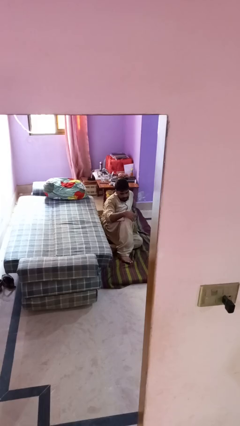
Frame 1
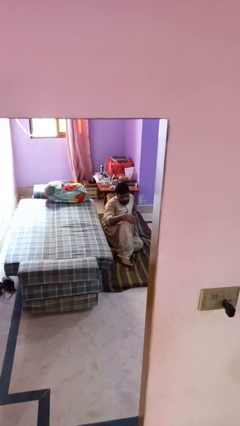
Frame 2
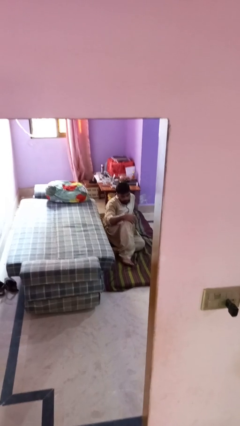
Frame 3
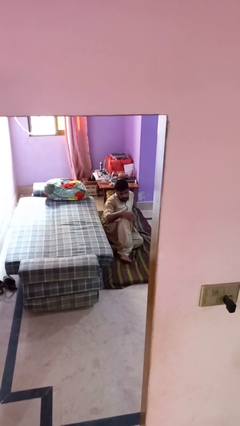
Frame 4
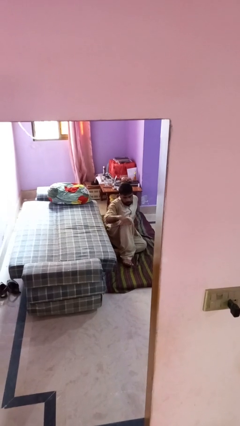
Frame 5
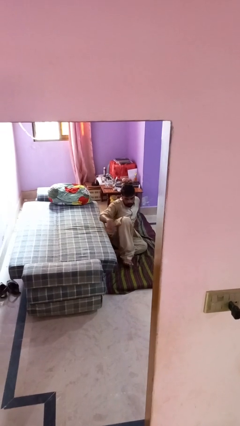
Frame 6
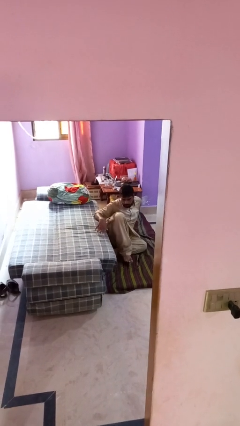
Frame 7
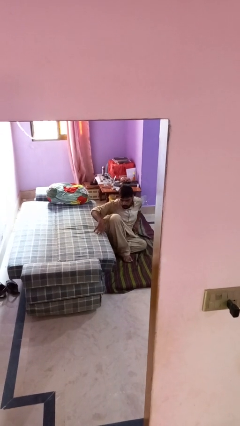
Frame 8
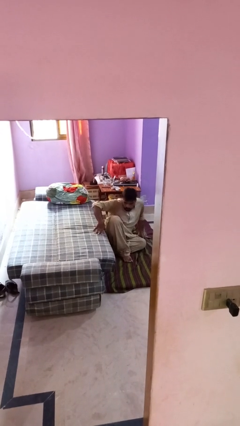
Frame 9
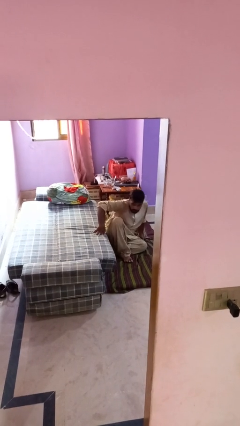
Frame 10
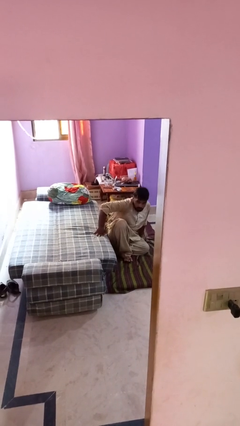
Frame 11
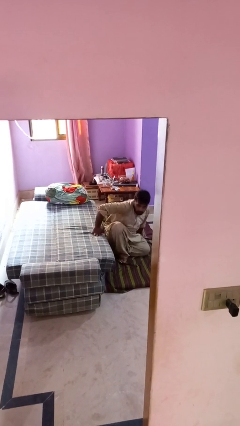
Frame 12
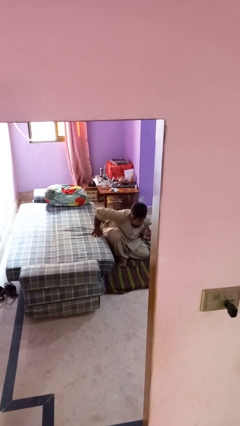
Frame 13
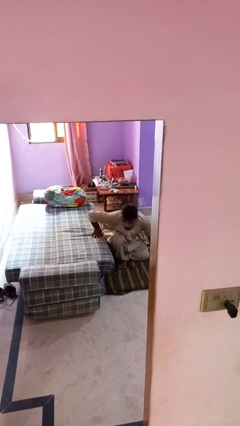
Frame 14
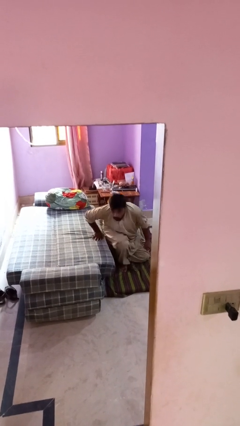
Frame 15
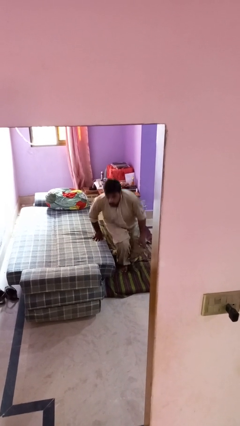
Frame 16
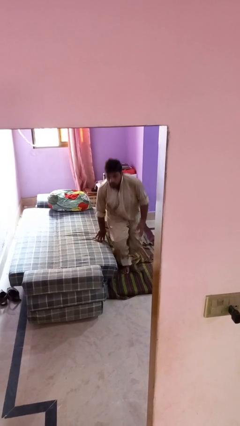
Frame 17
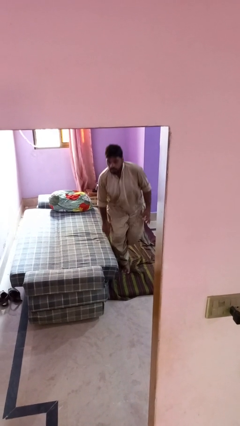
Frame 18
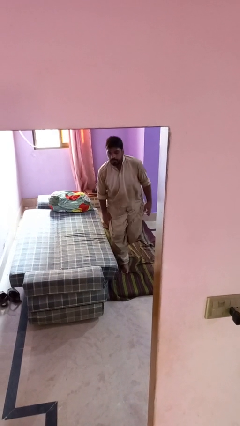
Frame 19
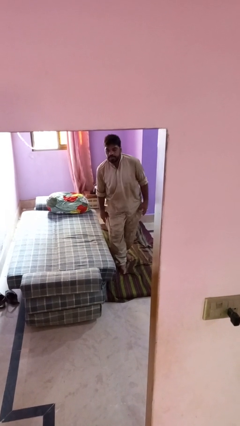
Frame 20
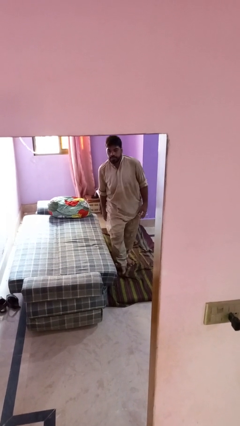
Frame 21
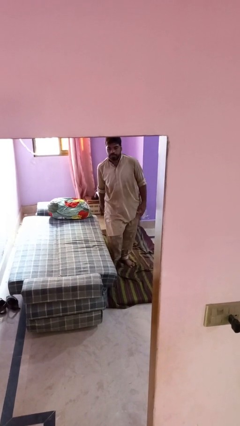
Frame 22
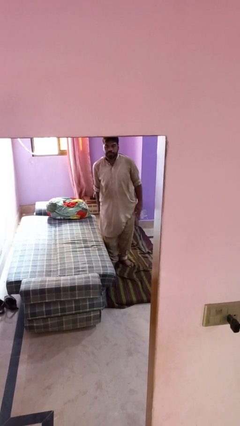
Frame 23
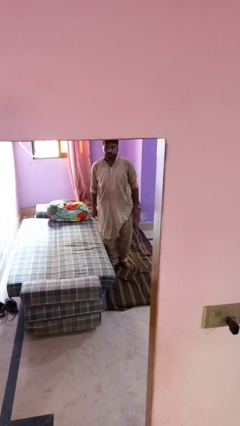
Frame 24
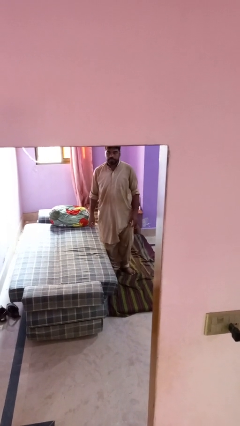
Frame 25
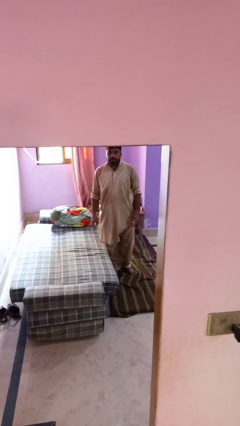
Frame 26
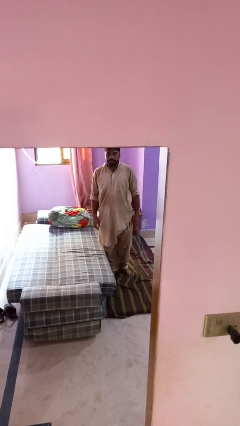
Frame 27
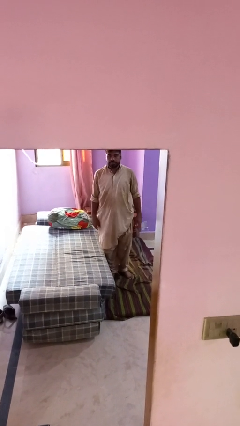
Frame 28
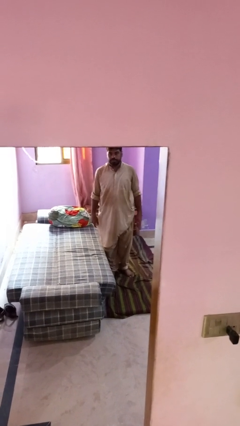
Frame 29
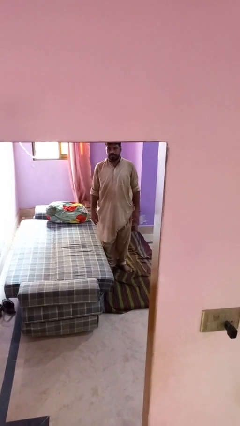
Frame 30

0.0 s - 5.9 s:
person stands up from floor

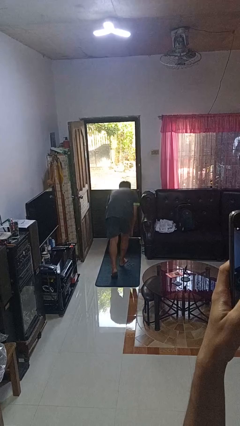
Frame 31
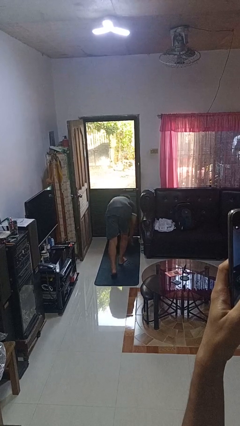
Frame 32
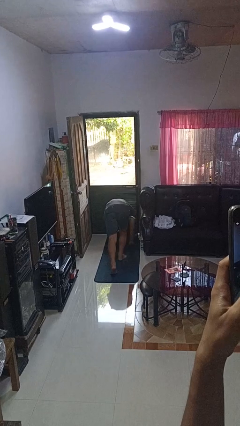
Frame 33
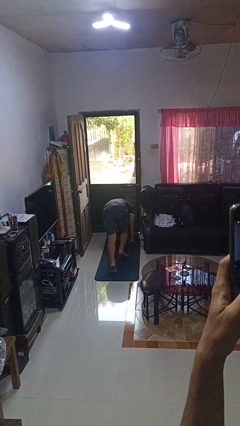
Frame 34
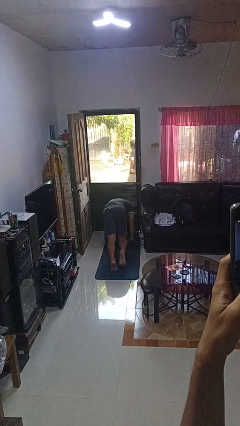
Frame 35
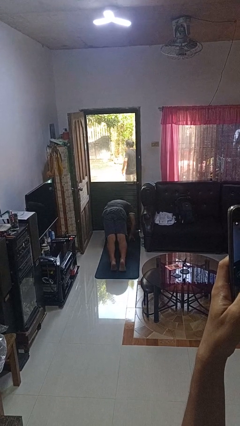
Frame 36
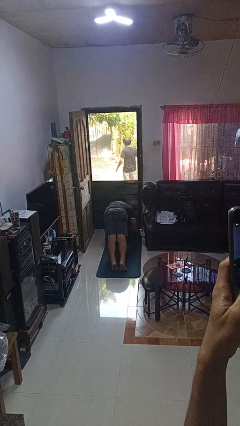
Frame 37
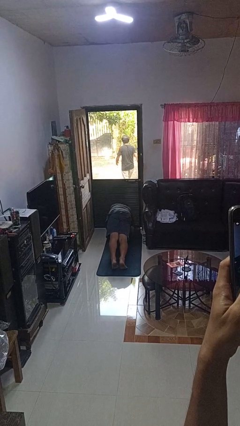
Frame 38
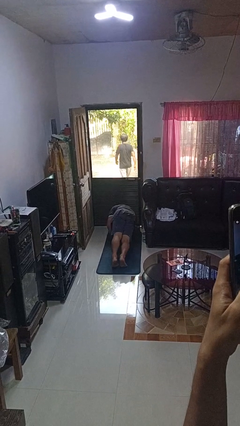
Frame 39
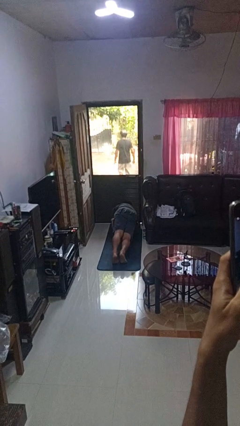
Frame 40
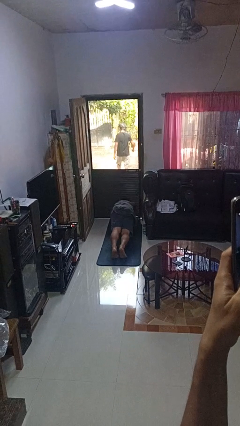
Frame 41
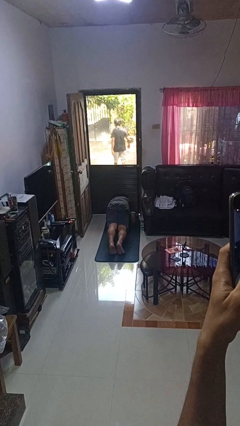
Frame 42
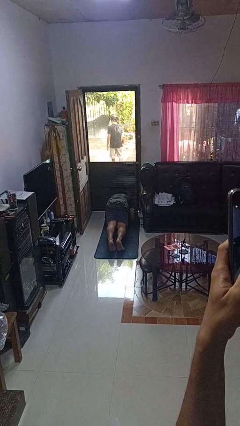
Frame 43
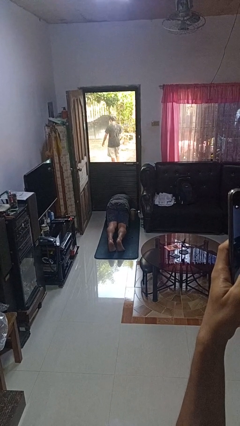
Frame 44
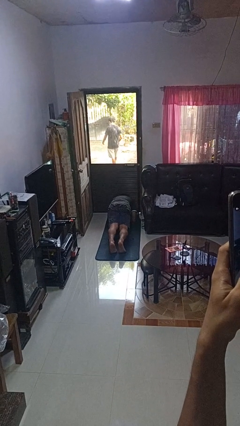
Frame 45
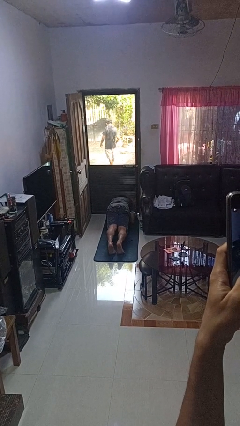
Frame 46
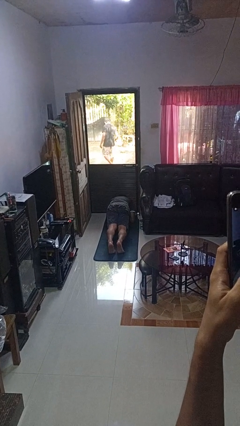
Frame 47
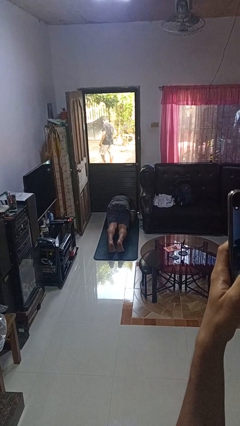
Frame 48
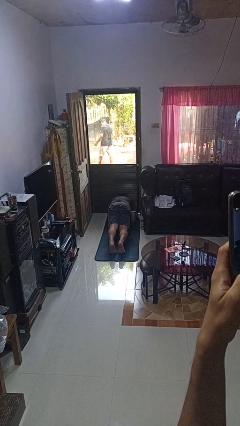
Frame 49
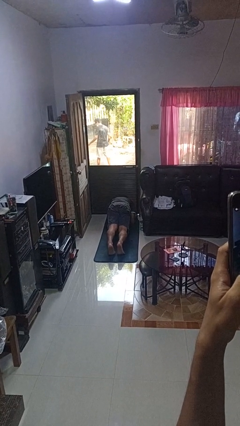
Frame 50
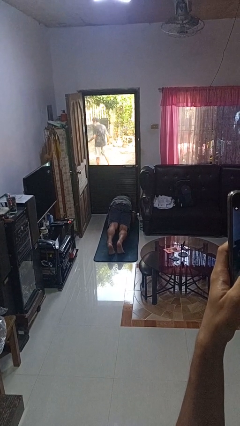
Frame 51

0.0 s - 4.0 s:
person exercises with plank

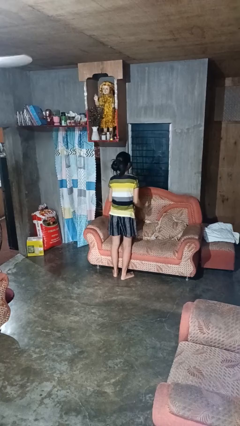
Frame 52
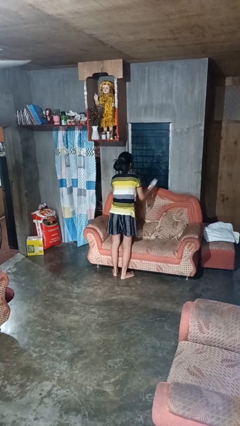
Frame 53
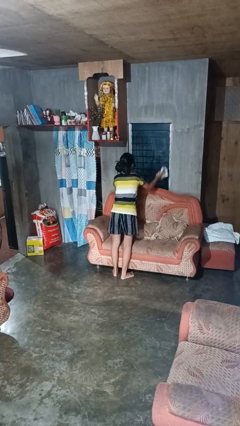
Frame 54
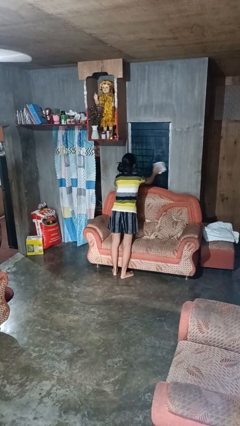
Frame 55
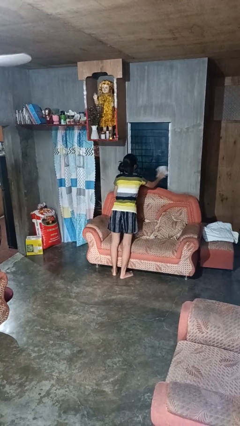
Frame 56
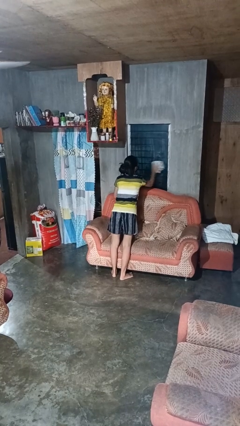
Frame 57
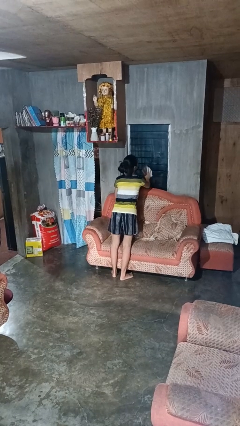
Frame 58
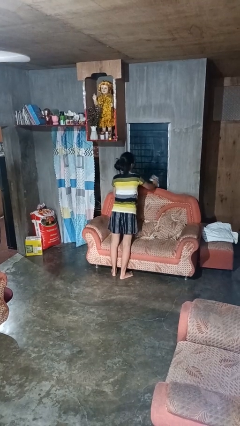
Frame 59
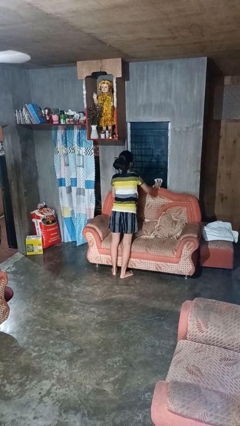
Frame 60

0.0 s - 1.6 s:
person washes window

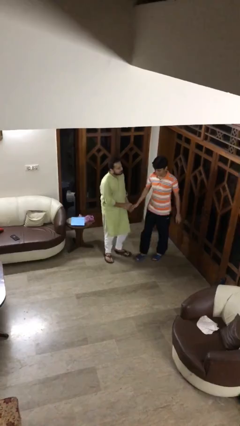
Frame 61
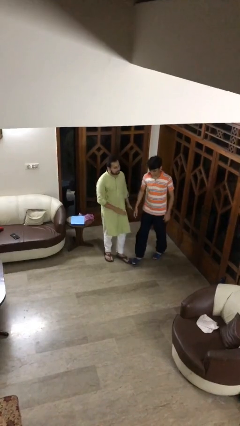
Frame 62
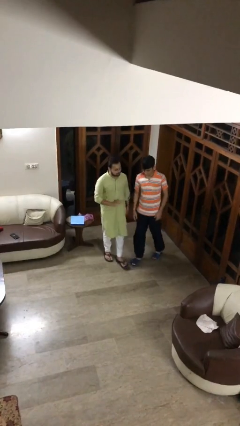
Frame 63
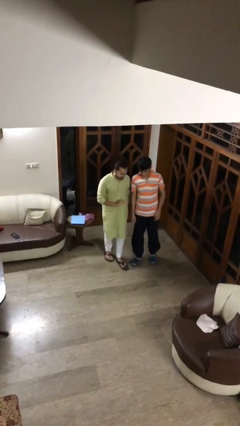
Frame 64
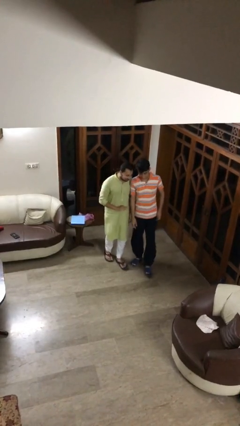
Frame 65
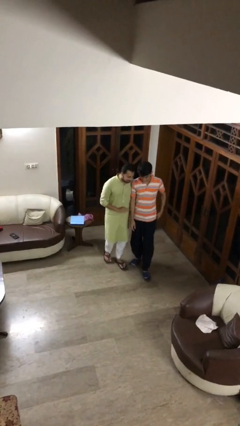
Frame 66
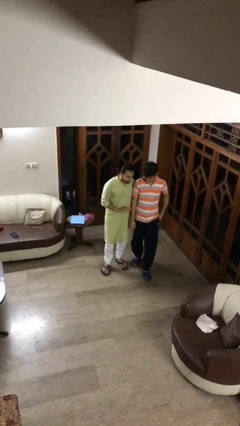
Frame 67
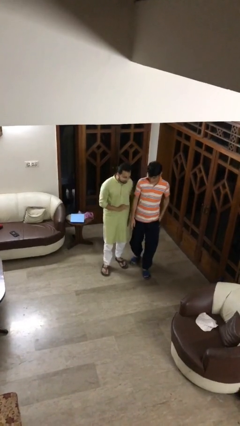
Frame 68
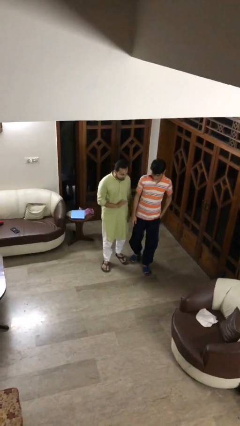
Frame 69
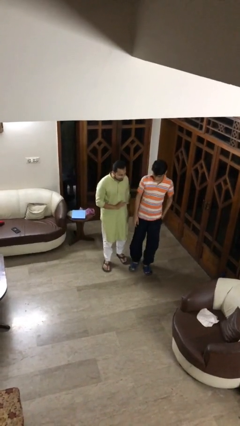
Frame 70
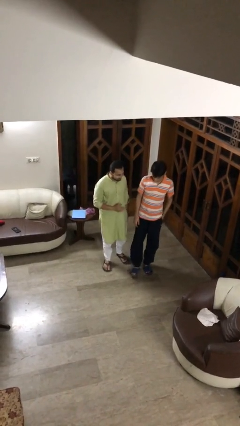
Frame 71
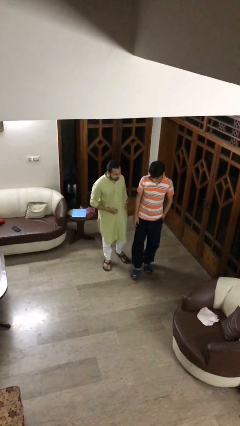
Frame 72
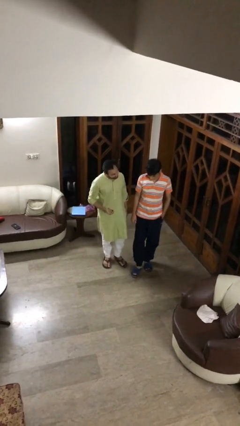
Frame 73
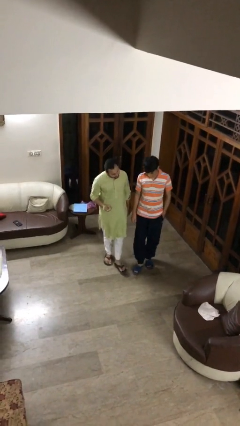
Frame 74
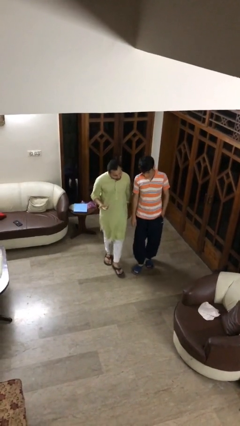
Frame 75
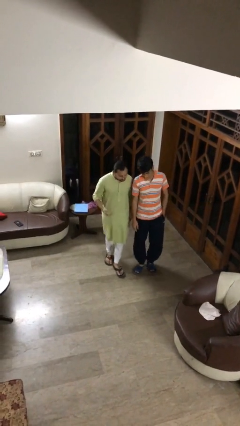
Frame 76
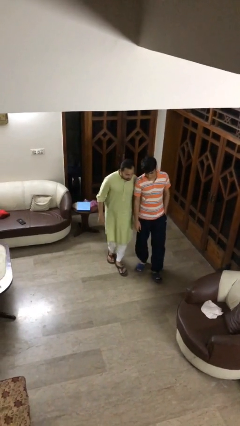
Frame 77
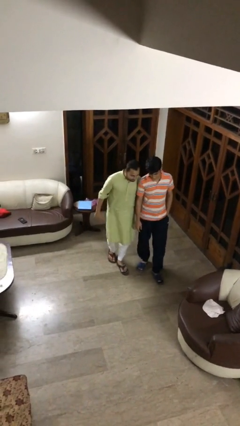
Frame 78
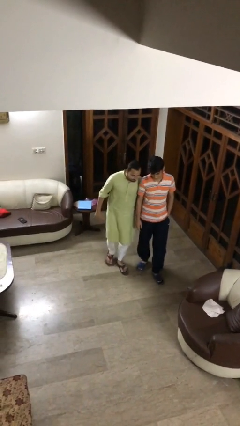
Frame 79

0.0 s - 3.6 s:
person talks to person

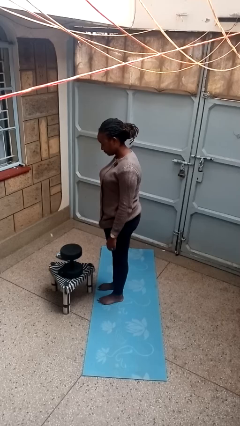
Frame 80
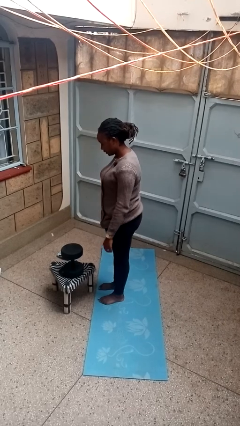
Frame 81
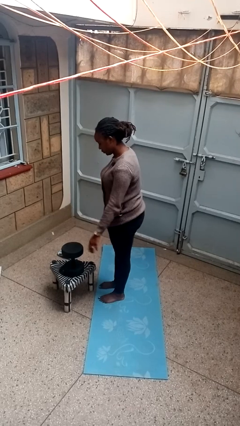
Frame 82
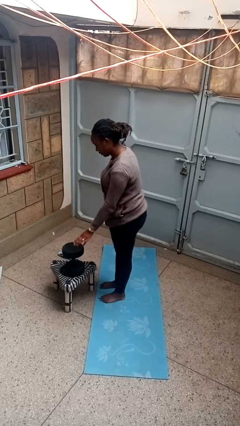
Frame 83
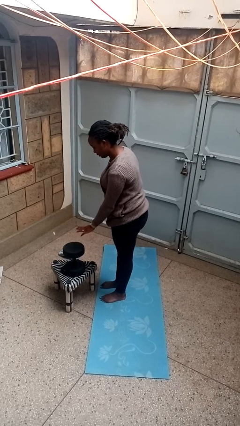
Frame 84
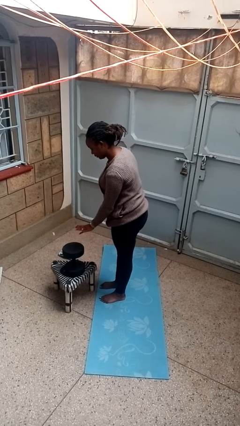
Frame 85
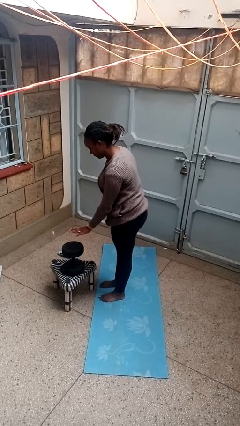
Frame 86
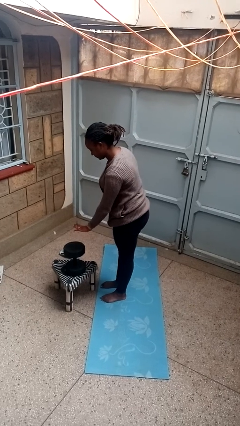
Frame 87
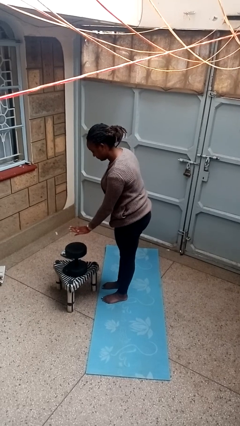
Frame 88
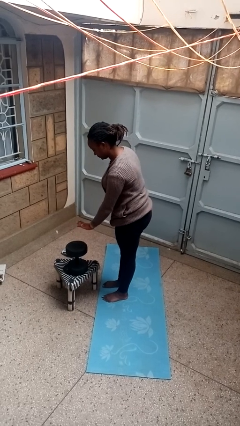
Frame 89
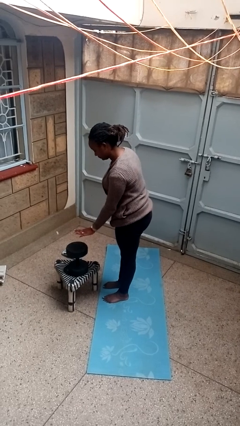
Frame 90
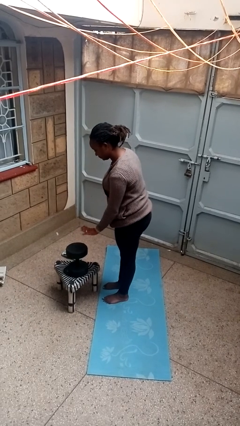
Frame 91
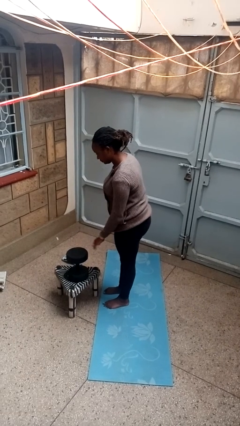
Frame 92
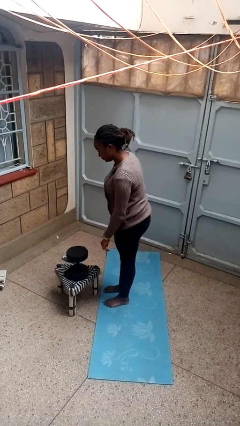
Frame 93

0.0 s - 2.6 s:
person waves hand over object
